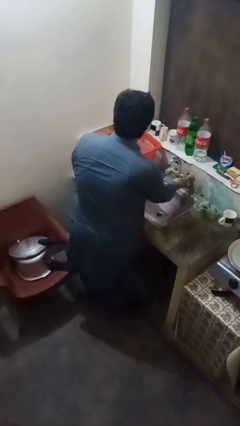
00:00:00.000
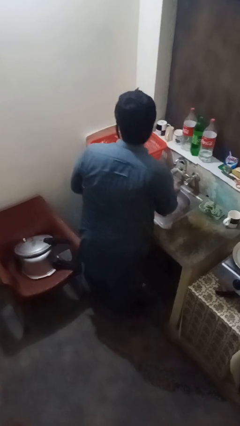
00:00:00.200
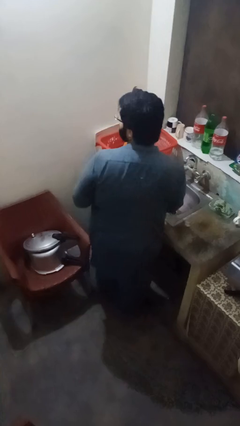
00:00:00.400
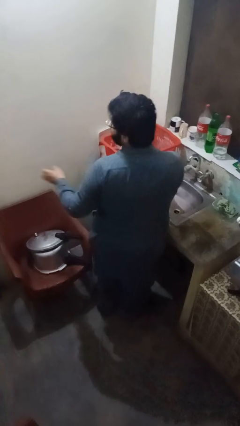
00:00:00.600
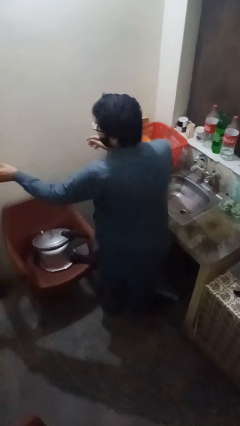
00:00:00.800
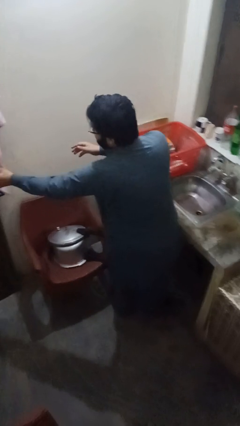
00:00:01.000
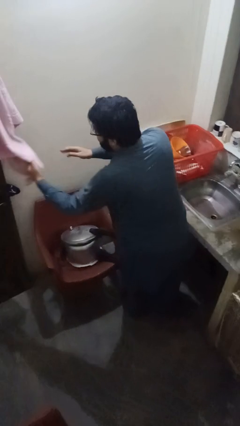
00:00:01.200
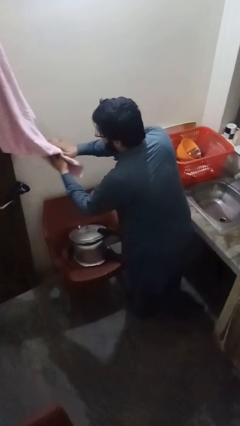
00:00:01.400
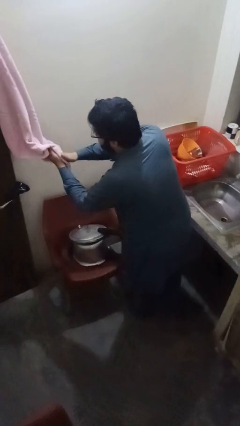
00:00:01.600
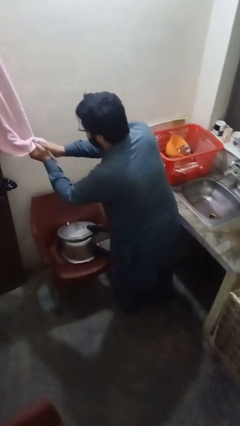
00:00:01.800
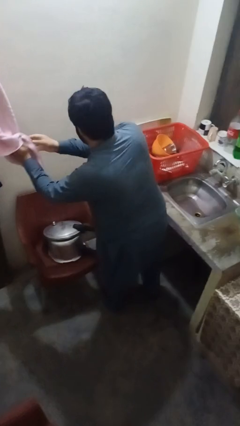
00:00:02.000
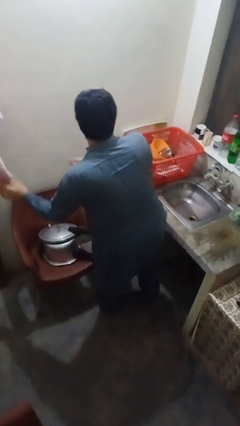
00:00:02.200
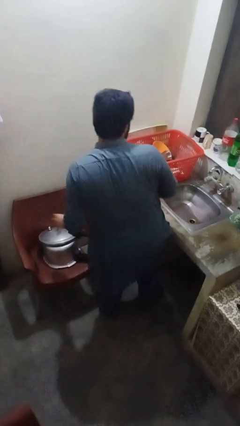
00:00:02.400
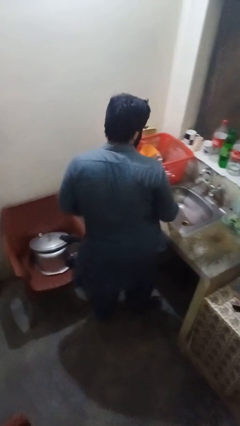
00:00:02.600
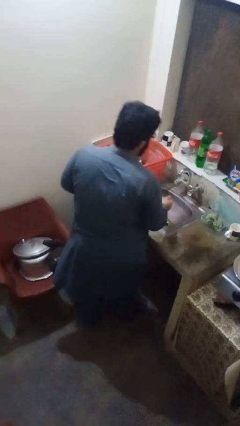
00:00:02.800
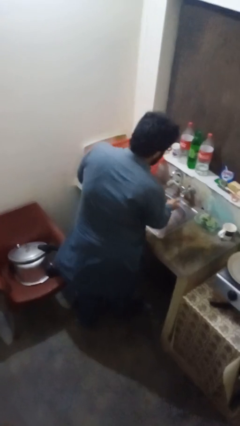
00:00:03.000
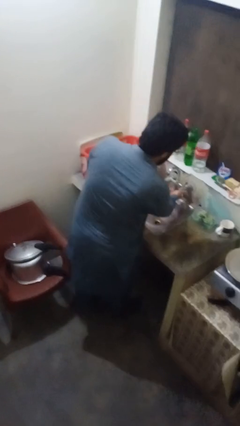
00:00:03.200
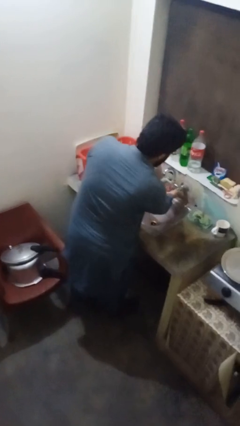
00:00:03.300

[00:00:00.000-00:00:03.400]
person dries hands with towel

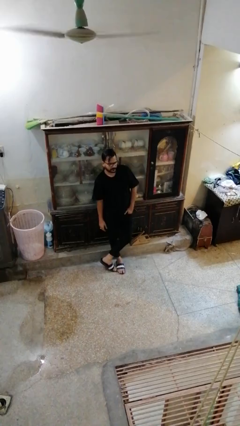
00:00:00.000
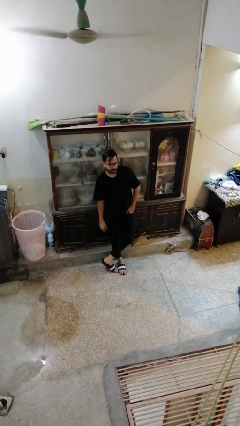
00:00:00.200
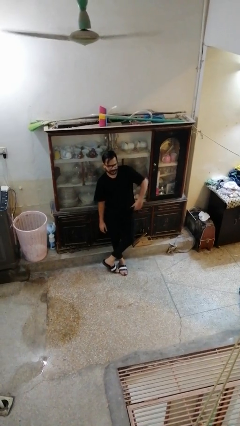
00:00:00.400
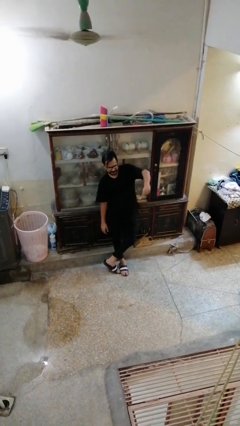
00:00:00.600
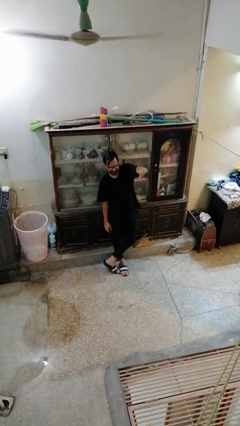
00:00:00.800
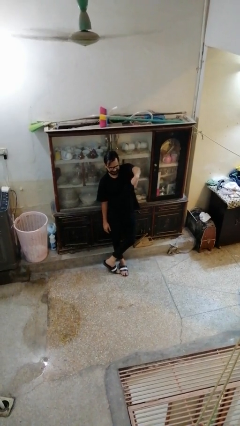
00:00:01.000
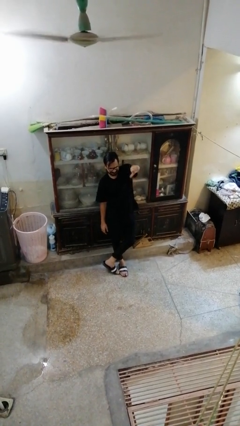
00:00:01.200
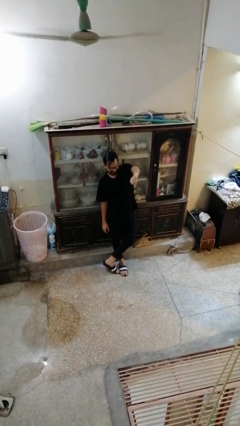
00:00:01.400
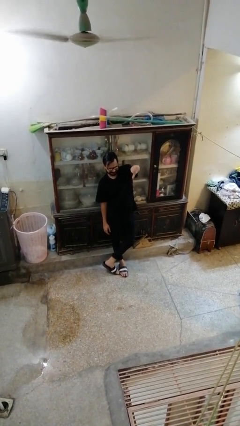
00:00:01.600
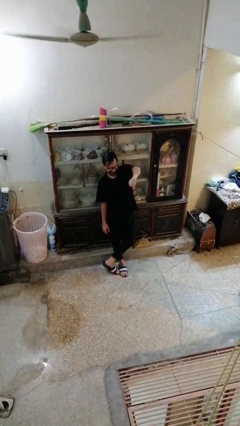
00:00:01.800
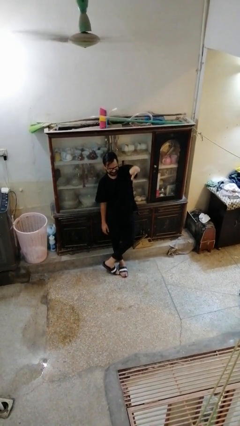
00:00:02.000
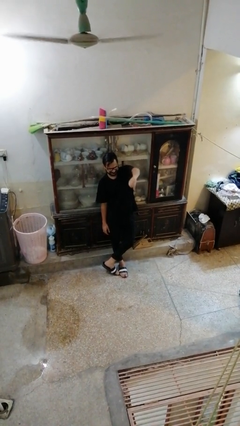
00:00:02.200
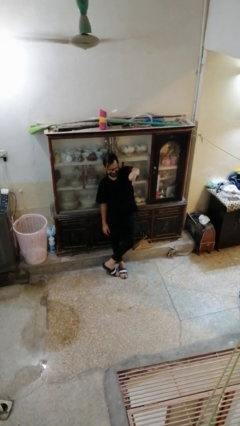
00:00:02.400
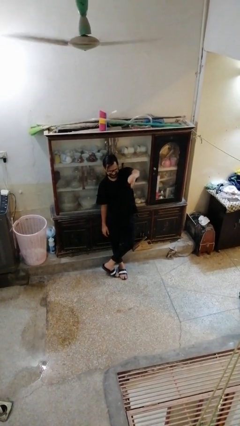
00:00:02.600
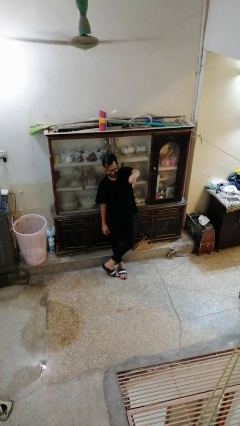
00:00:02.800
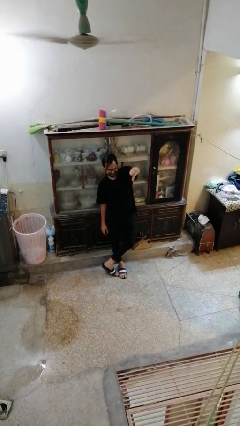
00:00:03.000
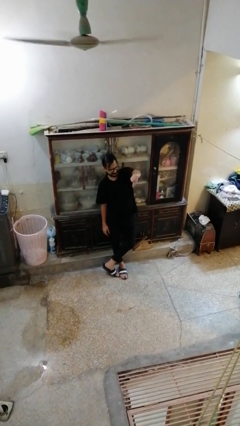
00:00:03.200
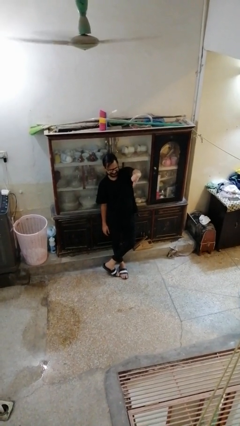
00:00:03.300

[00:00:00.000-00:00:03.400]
person gestures thumbs down

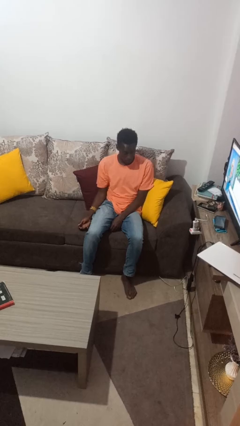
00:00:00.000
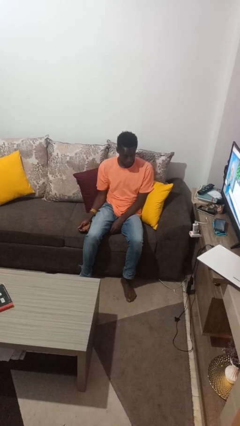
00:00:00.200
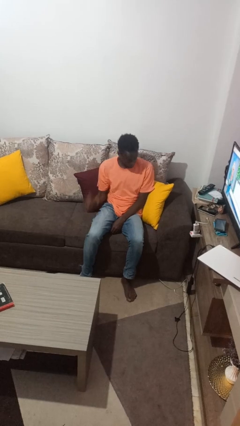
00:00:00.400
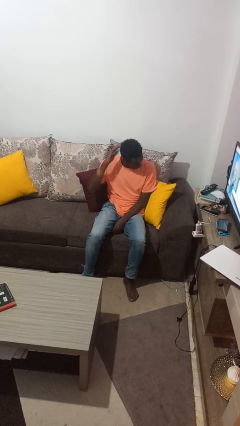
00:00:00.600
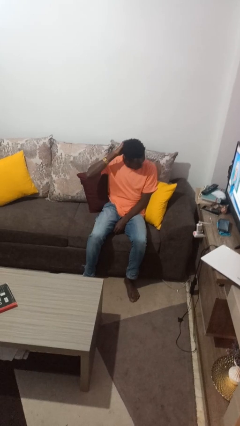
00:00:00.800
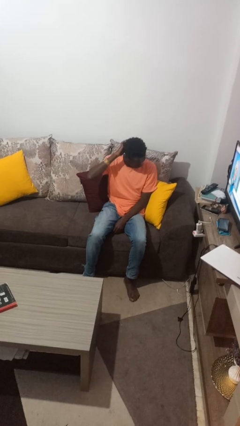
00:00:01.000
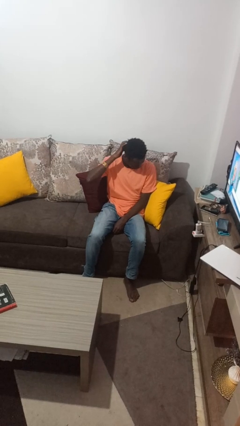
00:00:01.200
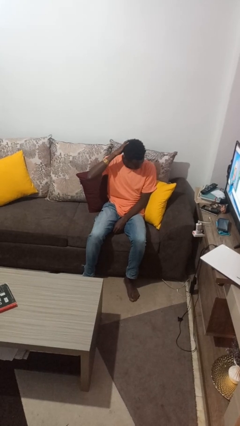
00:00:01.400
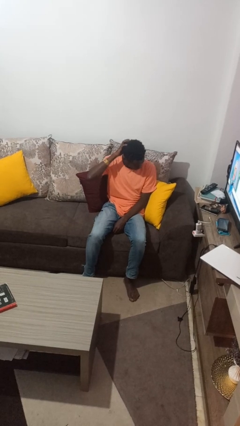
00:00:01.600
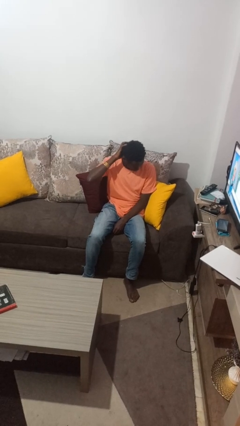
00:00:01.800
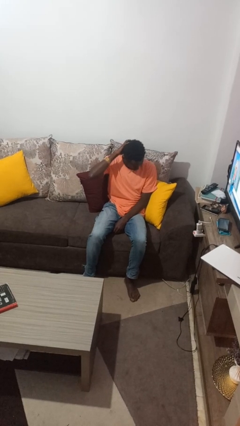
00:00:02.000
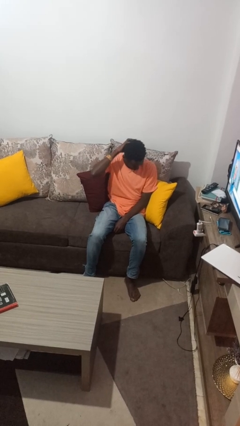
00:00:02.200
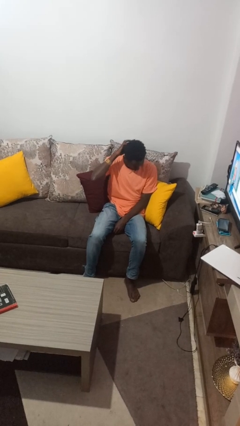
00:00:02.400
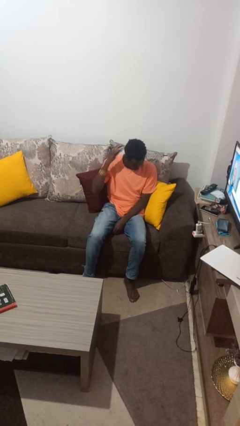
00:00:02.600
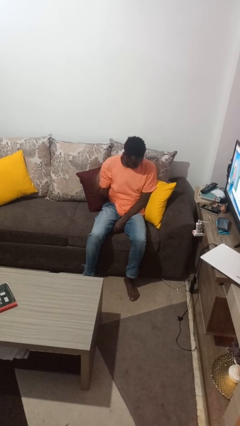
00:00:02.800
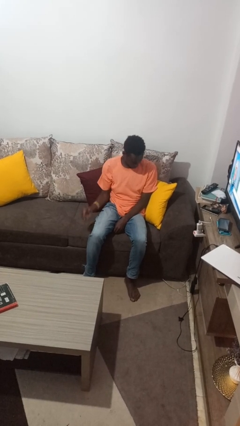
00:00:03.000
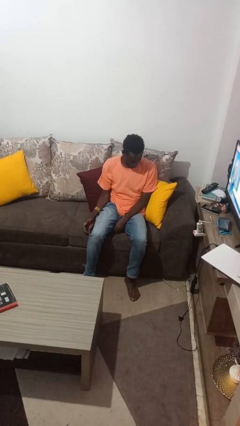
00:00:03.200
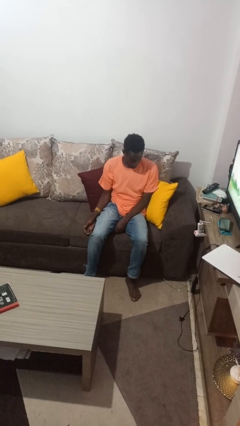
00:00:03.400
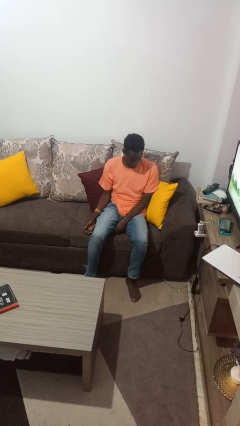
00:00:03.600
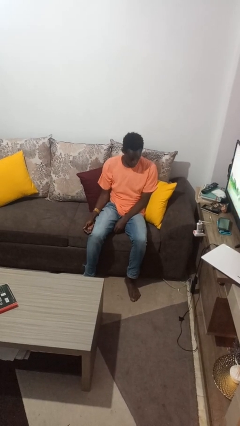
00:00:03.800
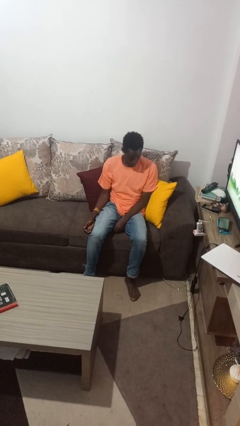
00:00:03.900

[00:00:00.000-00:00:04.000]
person strokes hair

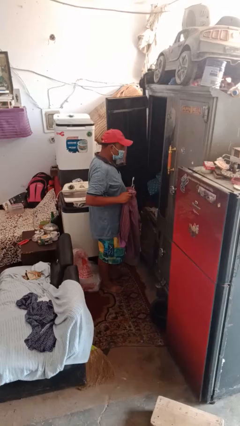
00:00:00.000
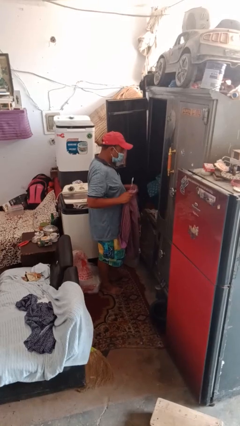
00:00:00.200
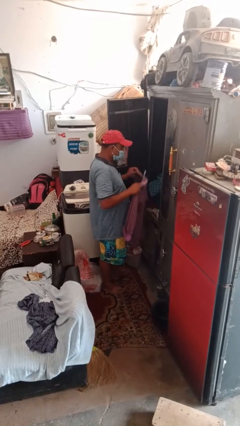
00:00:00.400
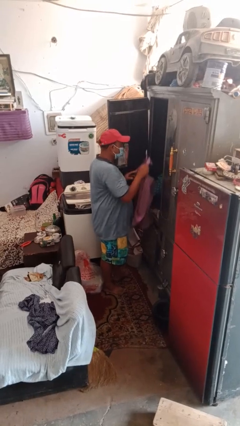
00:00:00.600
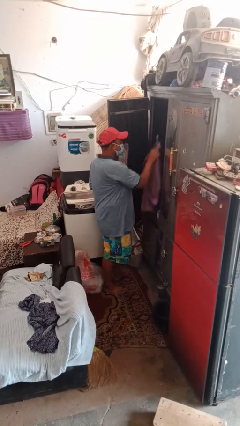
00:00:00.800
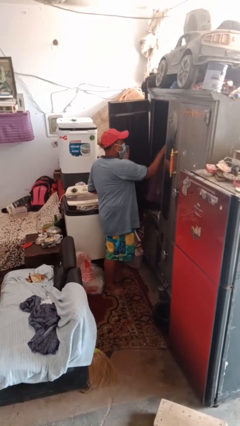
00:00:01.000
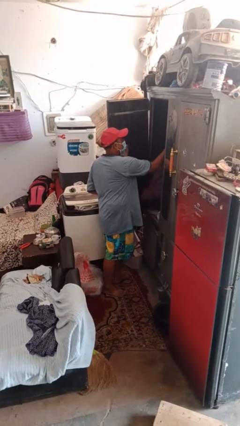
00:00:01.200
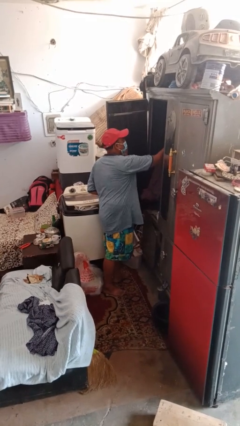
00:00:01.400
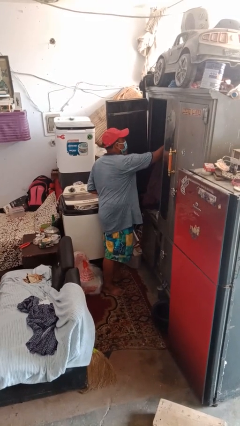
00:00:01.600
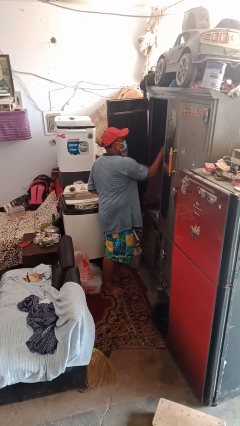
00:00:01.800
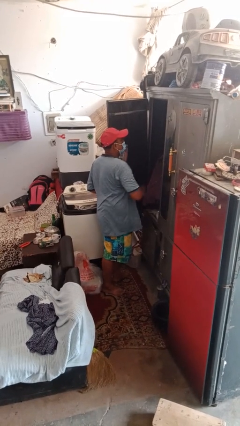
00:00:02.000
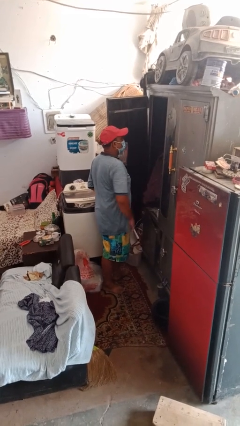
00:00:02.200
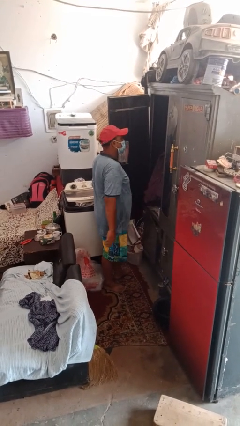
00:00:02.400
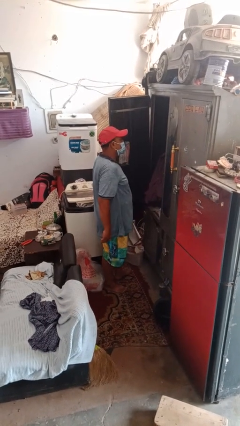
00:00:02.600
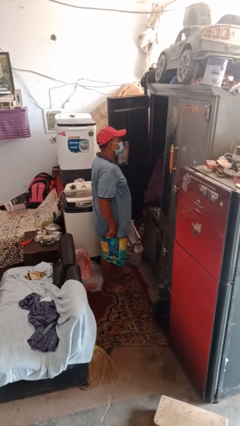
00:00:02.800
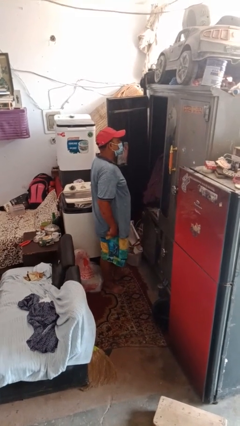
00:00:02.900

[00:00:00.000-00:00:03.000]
person puts clothes into closet

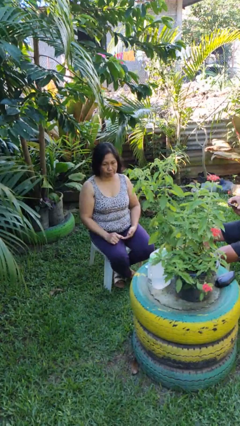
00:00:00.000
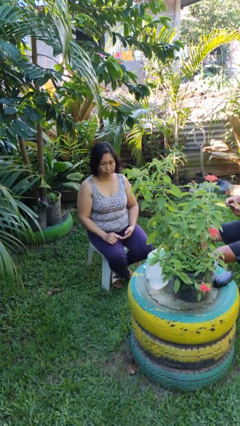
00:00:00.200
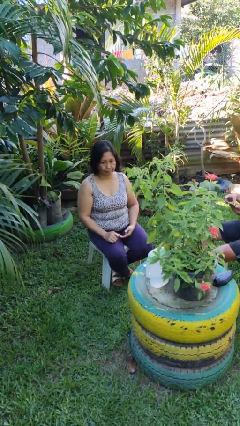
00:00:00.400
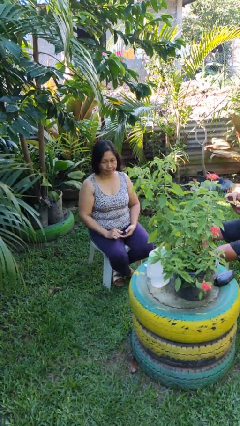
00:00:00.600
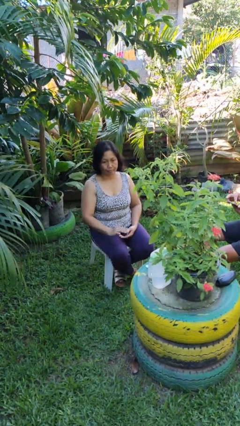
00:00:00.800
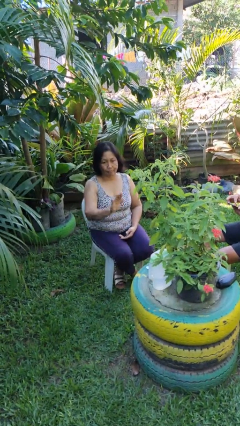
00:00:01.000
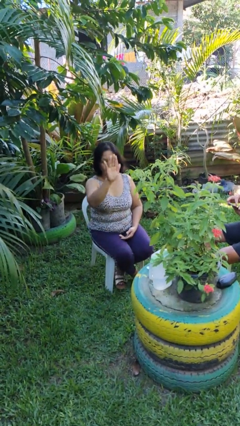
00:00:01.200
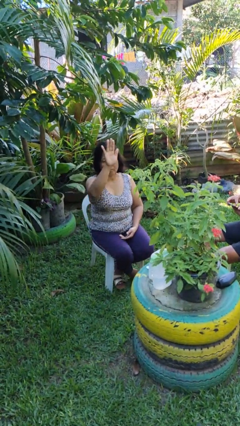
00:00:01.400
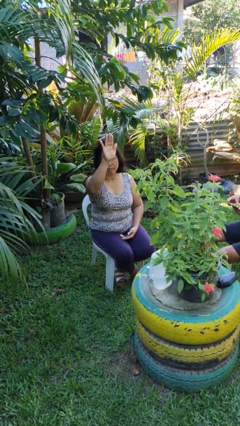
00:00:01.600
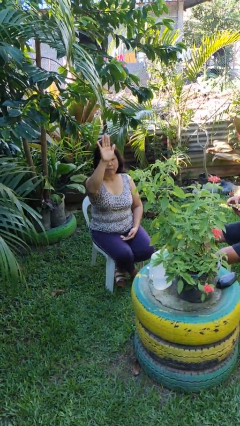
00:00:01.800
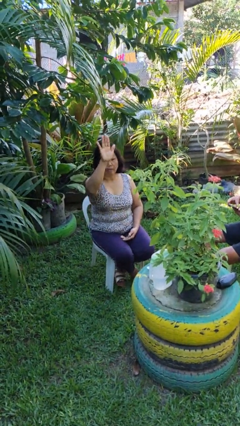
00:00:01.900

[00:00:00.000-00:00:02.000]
person gestures swipe up

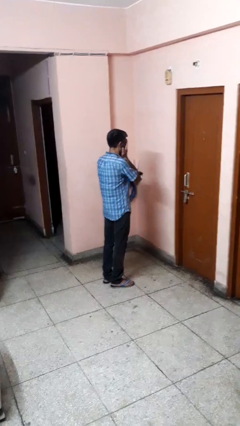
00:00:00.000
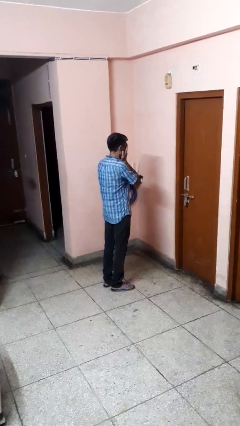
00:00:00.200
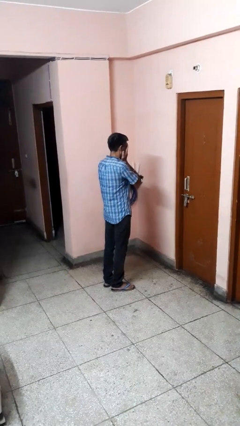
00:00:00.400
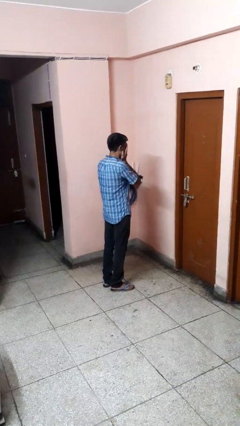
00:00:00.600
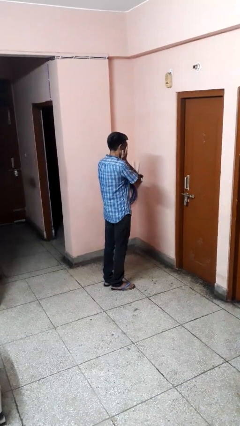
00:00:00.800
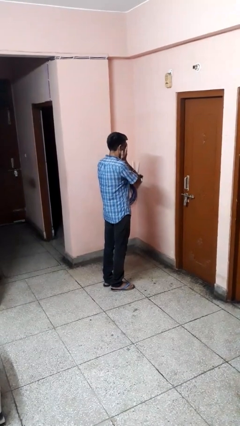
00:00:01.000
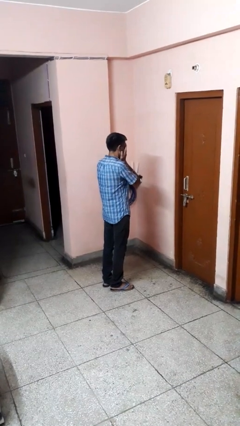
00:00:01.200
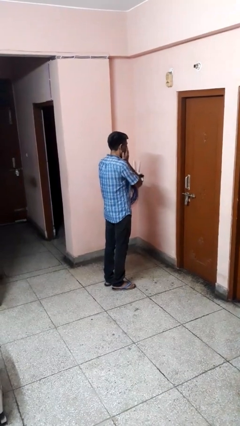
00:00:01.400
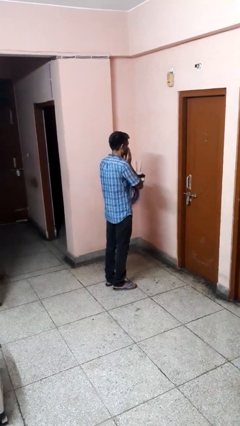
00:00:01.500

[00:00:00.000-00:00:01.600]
person covers face with hands
